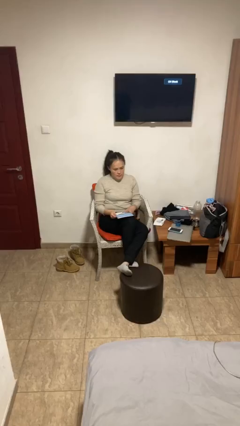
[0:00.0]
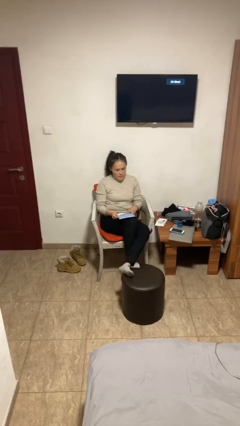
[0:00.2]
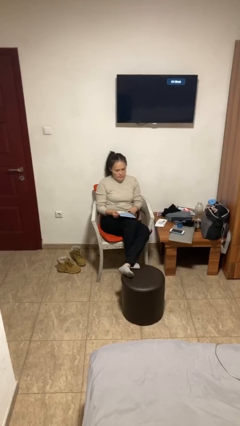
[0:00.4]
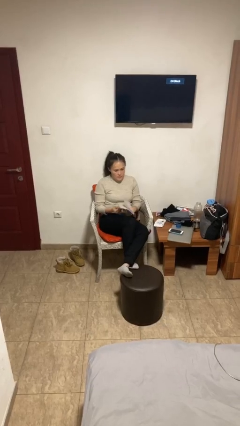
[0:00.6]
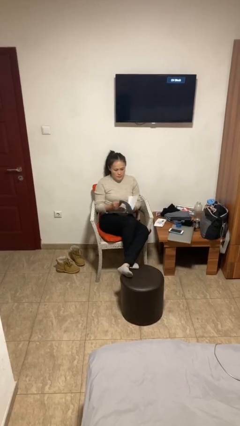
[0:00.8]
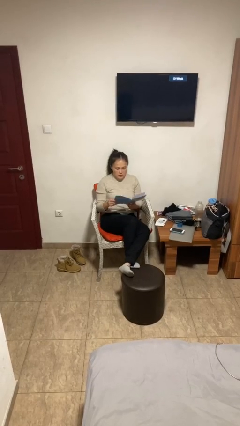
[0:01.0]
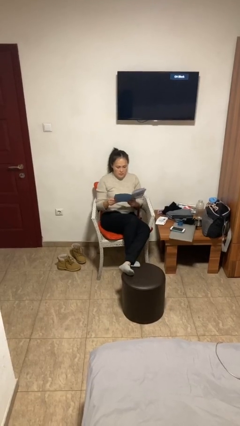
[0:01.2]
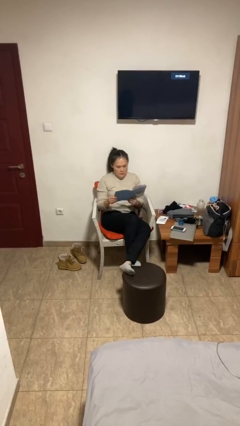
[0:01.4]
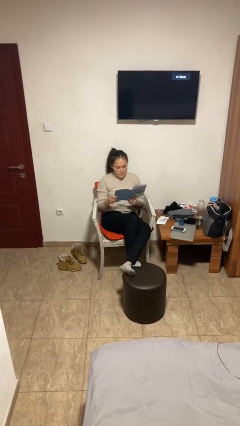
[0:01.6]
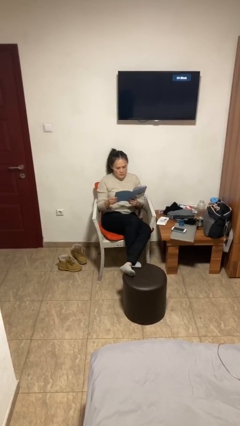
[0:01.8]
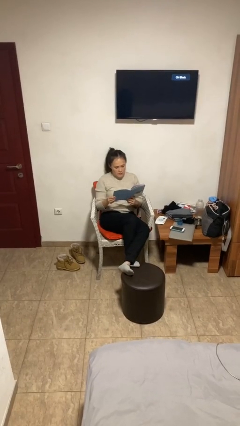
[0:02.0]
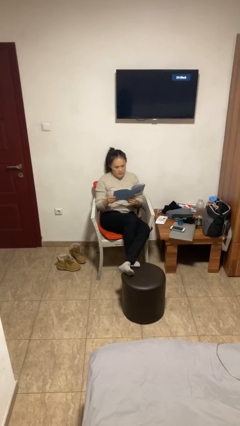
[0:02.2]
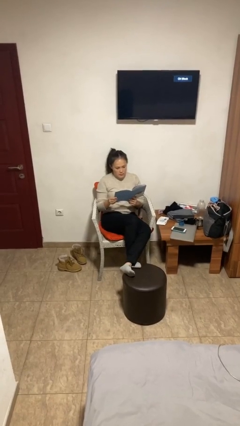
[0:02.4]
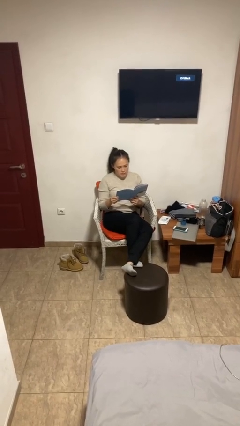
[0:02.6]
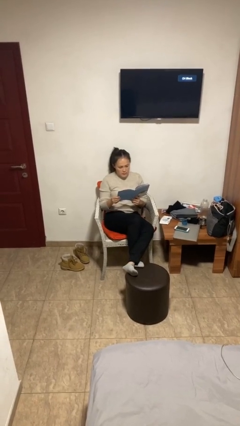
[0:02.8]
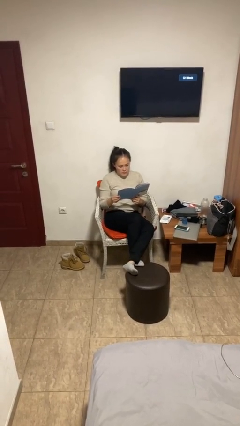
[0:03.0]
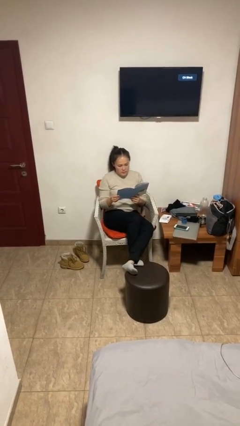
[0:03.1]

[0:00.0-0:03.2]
person reads document

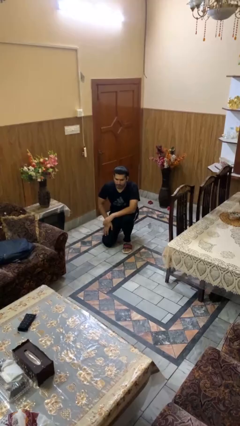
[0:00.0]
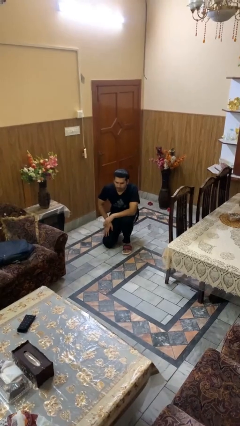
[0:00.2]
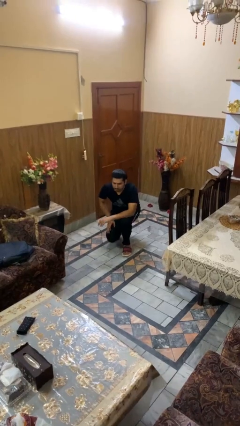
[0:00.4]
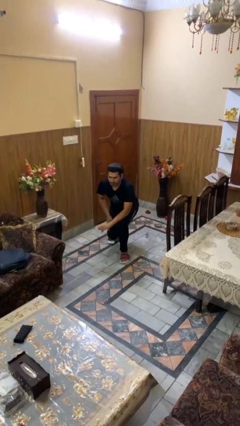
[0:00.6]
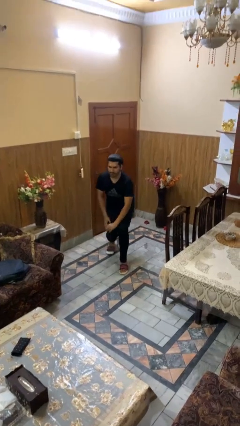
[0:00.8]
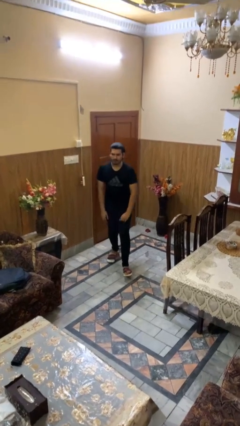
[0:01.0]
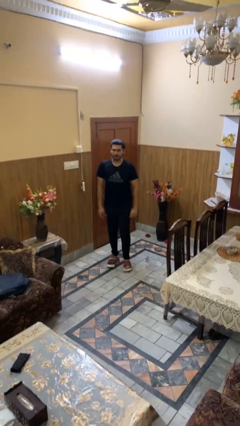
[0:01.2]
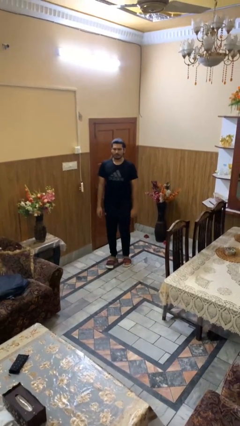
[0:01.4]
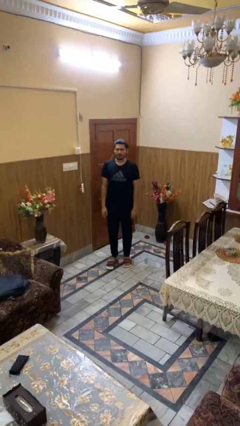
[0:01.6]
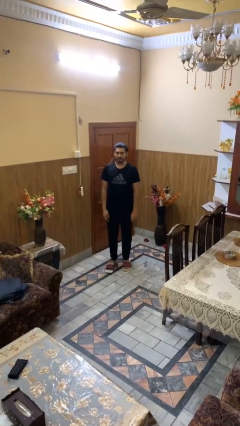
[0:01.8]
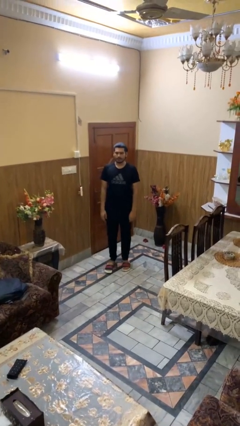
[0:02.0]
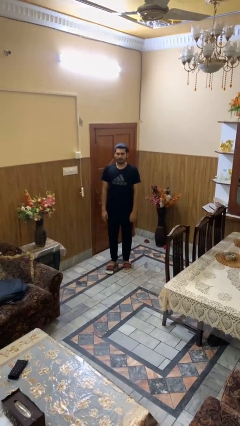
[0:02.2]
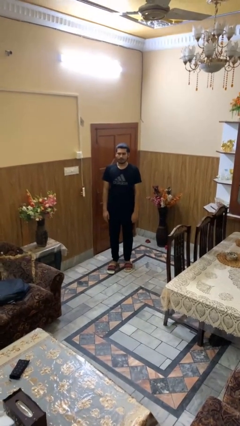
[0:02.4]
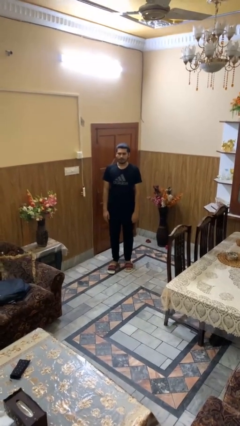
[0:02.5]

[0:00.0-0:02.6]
person stands up from floor

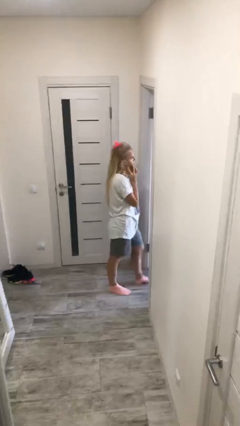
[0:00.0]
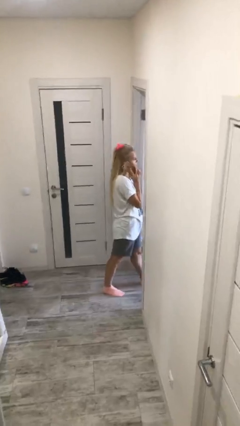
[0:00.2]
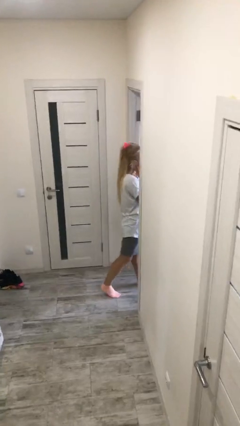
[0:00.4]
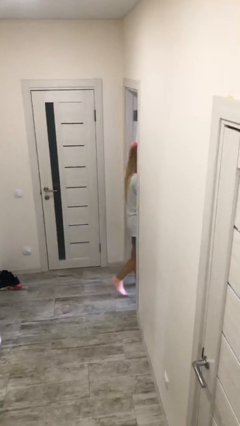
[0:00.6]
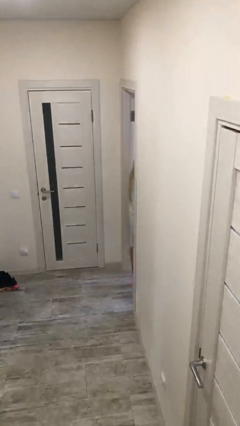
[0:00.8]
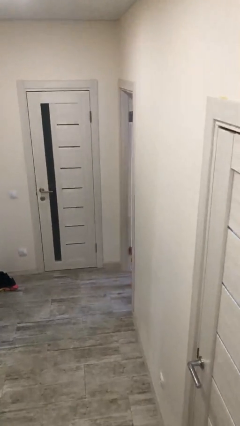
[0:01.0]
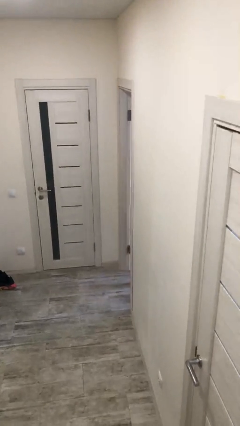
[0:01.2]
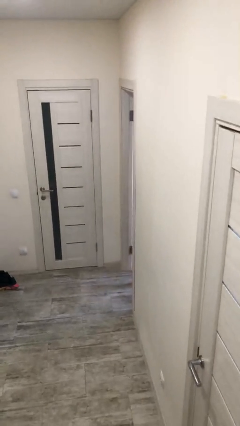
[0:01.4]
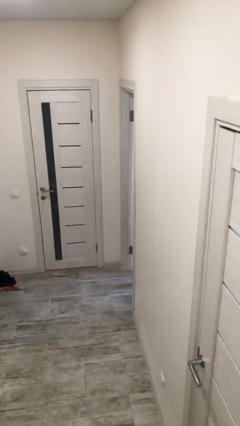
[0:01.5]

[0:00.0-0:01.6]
person exits scene through structure

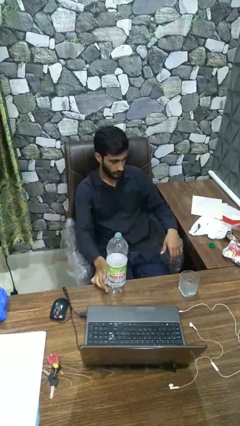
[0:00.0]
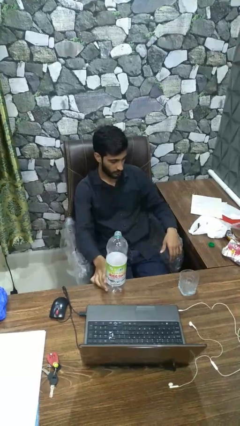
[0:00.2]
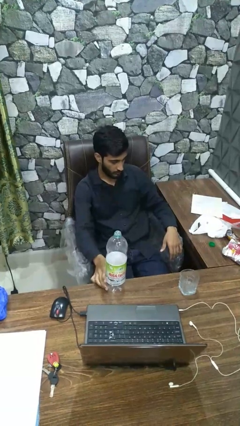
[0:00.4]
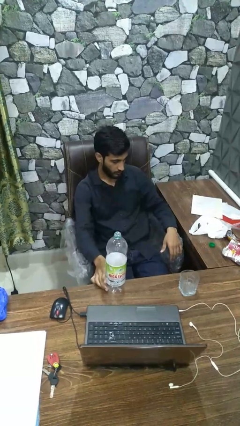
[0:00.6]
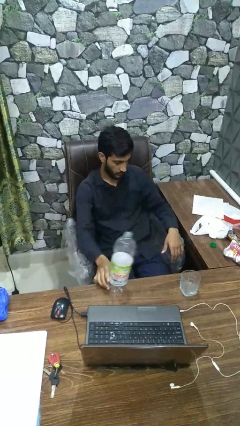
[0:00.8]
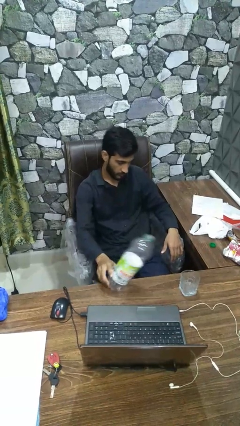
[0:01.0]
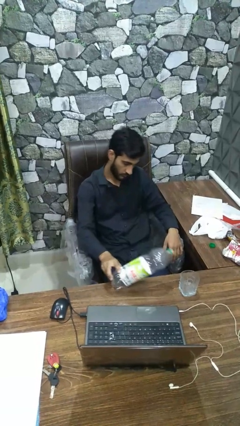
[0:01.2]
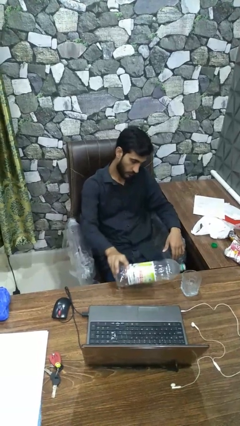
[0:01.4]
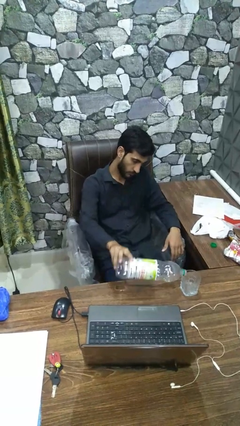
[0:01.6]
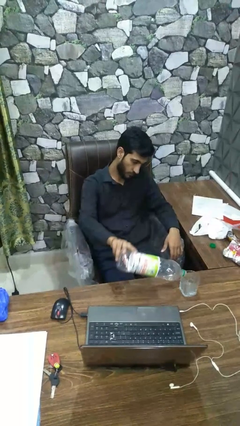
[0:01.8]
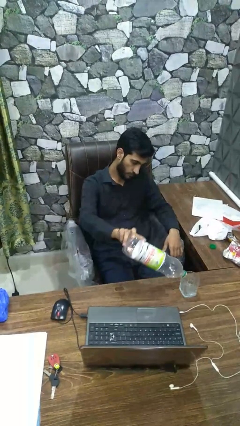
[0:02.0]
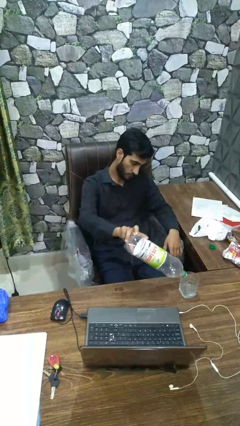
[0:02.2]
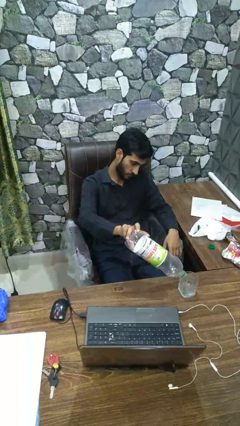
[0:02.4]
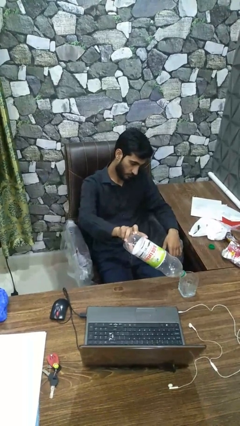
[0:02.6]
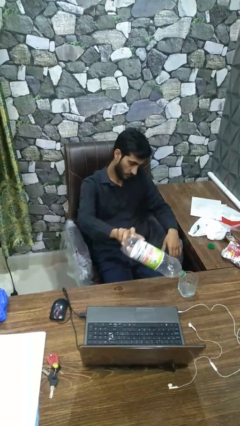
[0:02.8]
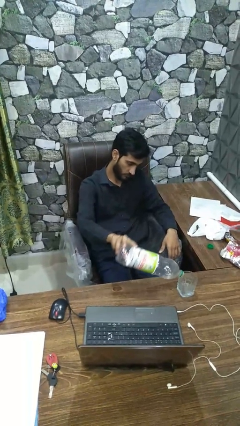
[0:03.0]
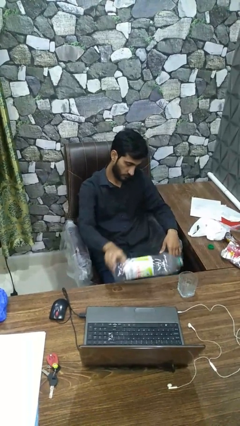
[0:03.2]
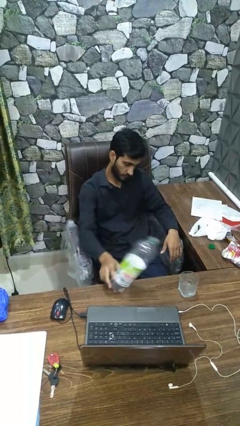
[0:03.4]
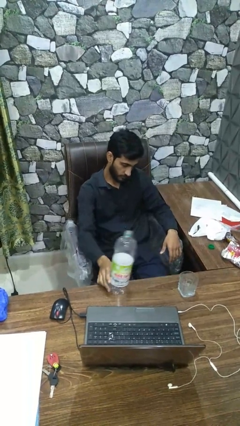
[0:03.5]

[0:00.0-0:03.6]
person pours liquid into cup

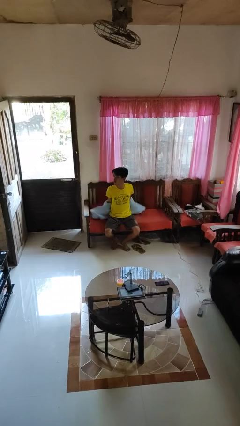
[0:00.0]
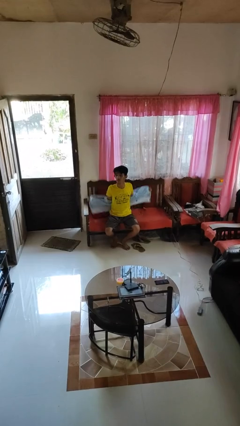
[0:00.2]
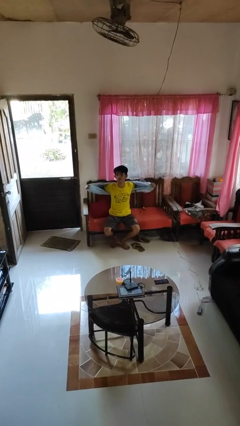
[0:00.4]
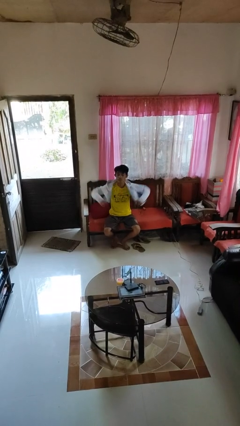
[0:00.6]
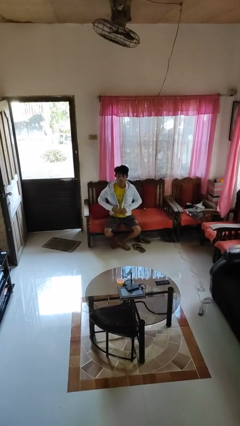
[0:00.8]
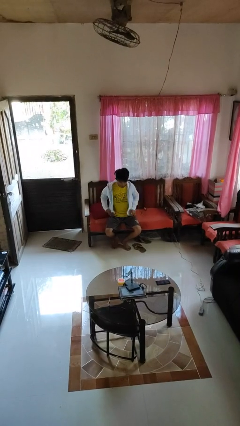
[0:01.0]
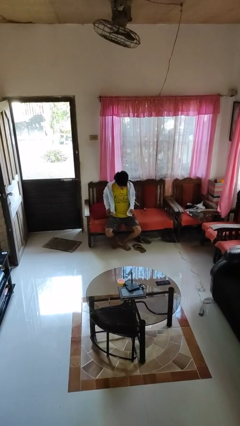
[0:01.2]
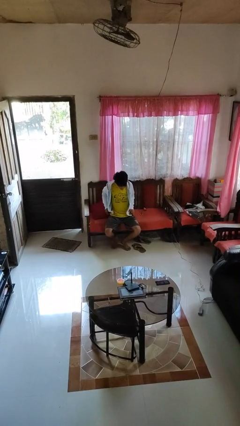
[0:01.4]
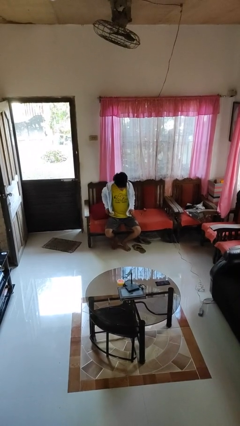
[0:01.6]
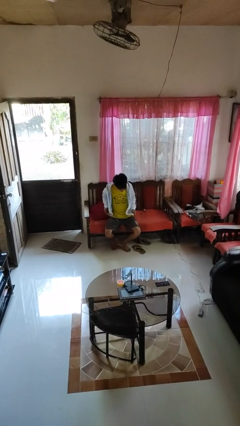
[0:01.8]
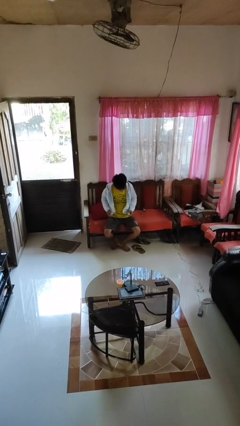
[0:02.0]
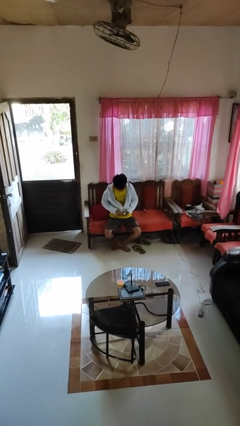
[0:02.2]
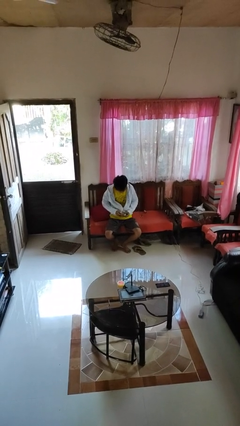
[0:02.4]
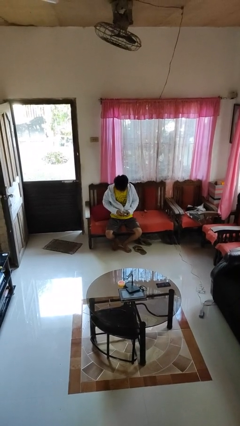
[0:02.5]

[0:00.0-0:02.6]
person puts on jacket

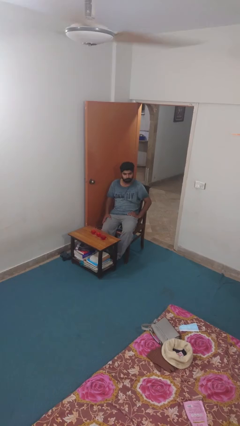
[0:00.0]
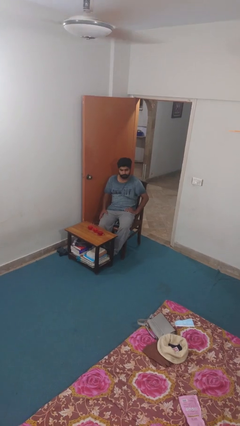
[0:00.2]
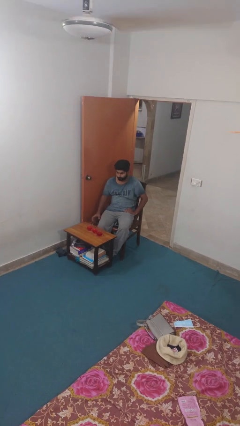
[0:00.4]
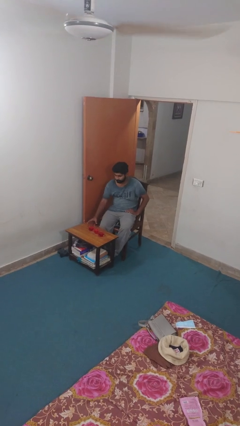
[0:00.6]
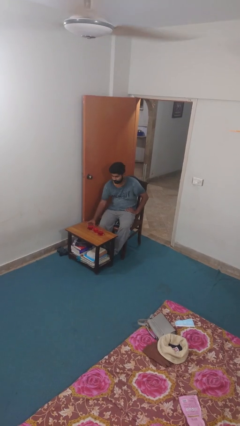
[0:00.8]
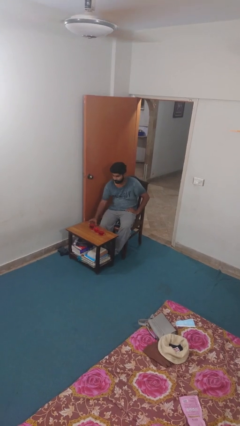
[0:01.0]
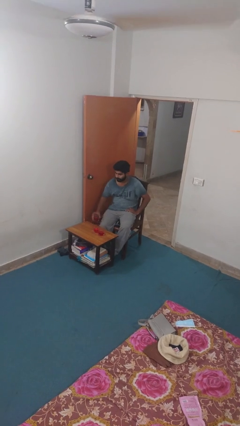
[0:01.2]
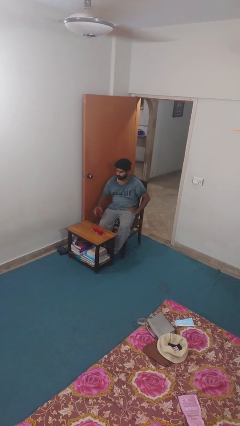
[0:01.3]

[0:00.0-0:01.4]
person picks up object from table

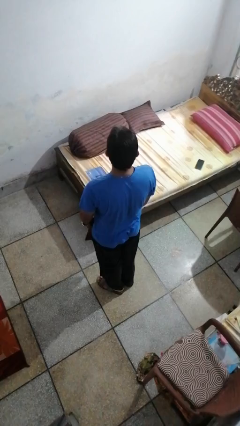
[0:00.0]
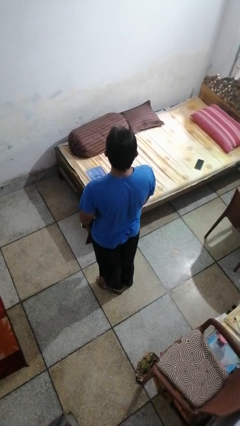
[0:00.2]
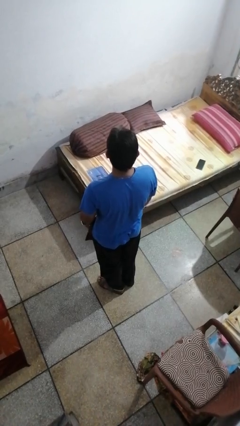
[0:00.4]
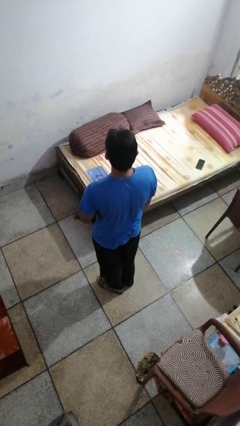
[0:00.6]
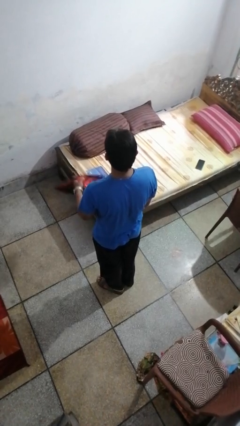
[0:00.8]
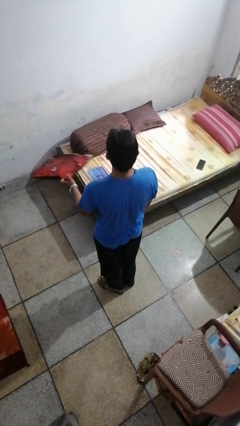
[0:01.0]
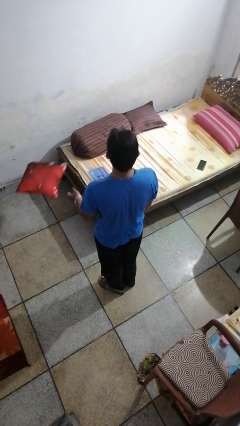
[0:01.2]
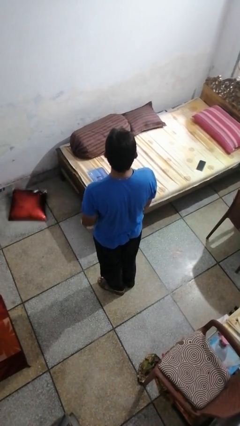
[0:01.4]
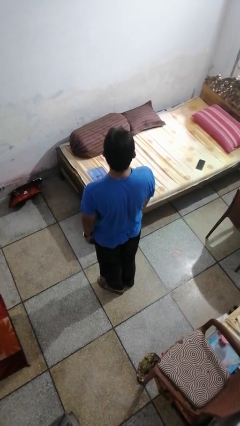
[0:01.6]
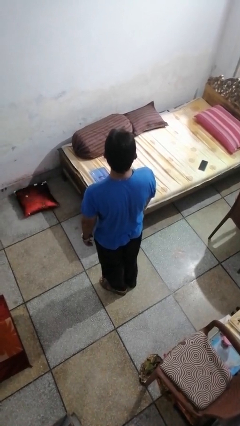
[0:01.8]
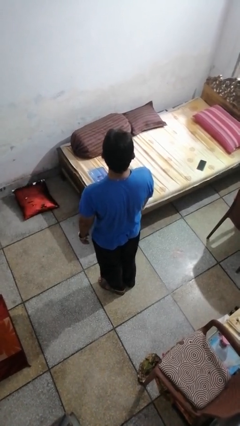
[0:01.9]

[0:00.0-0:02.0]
person throws object to ground

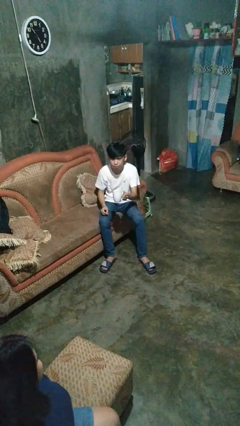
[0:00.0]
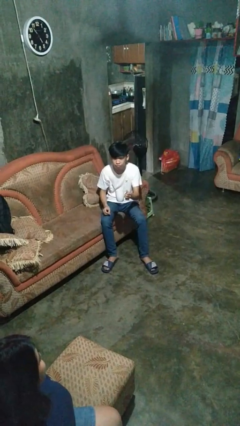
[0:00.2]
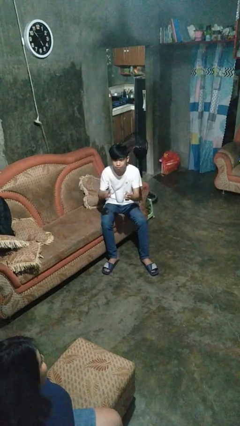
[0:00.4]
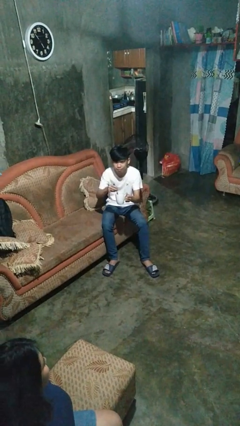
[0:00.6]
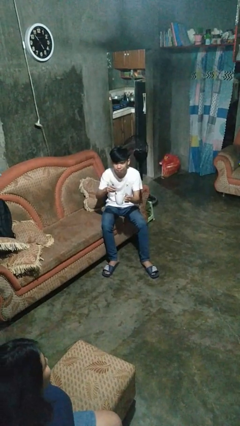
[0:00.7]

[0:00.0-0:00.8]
person stirs mug
